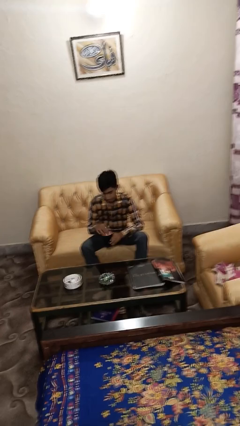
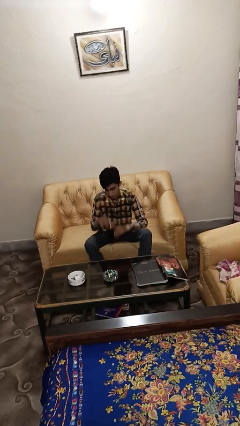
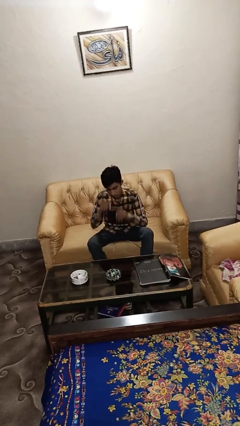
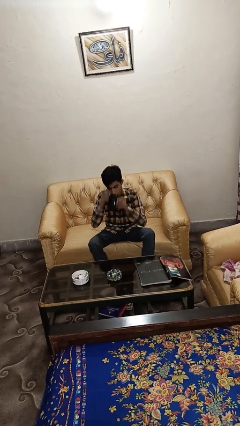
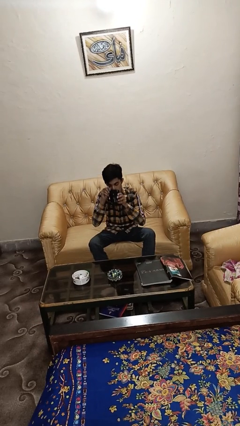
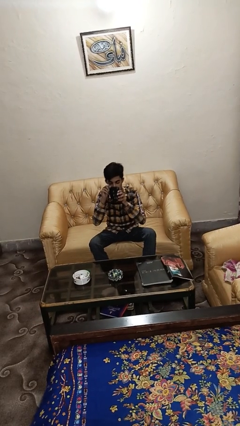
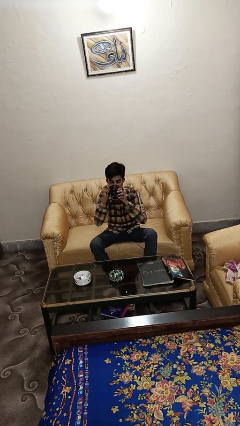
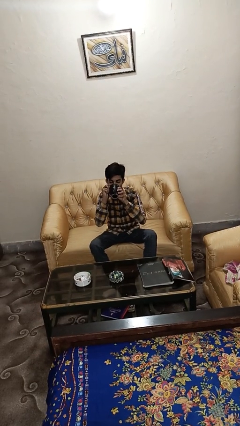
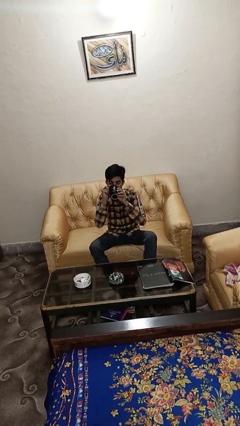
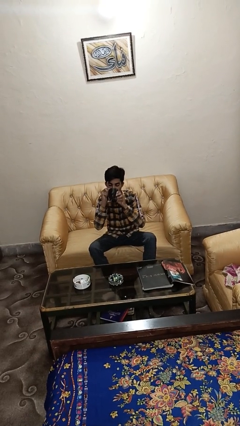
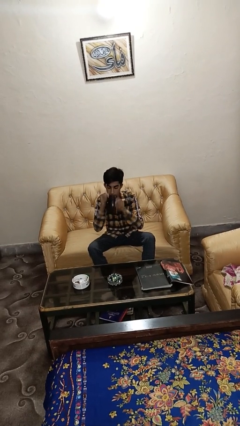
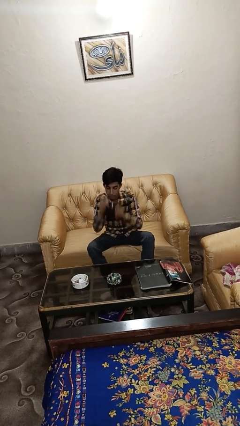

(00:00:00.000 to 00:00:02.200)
person drinks from mug

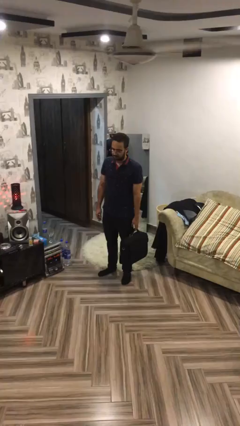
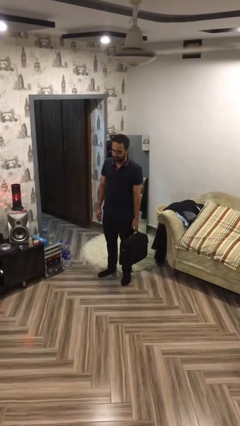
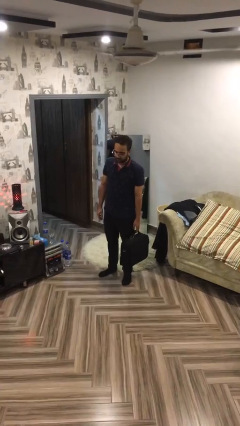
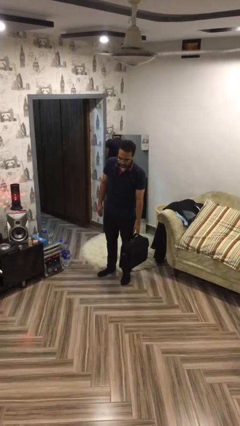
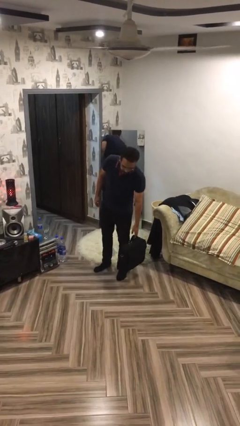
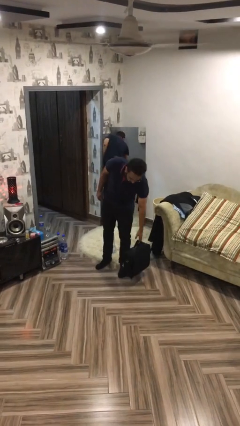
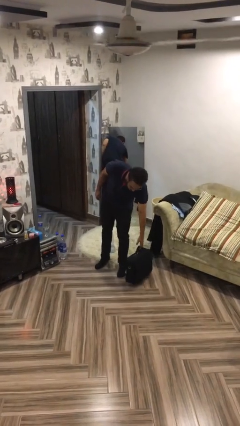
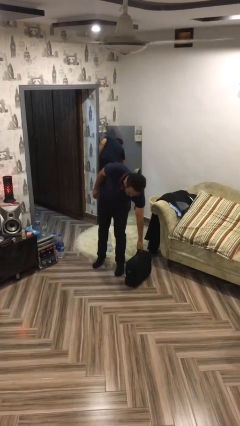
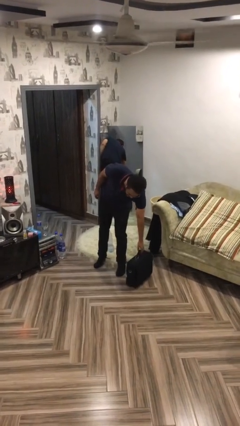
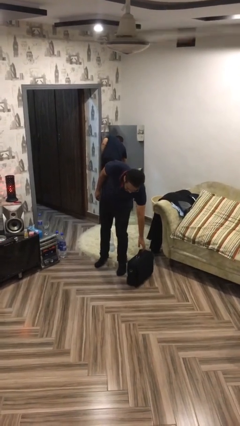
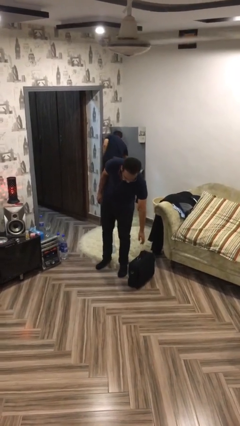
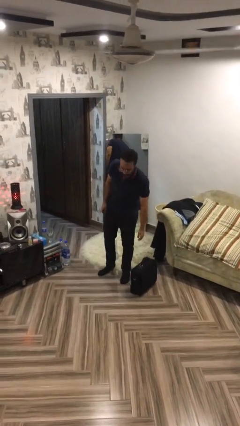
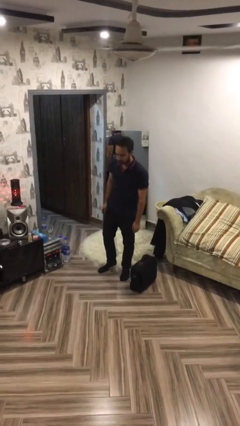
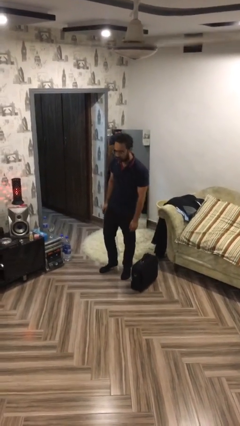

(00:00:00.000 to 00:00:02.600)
person puts down object on floor

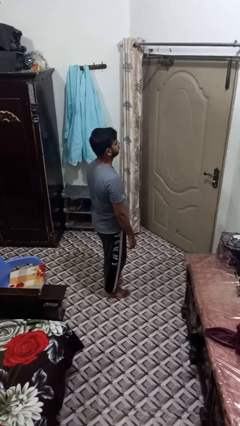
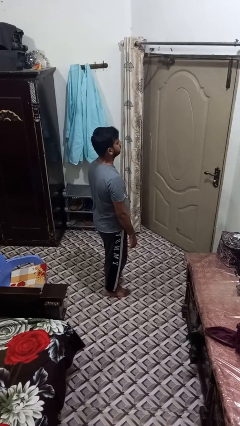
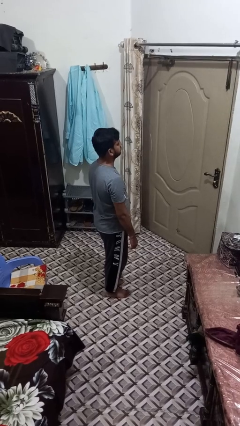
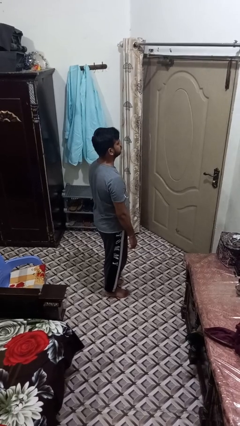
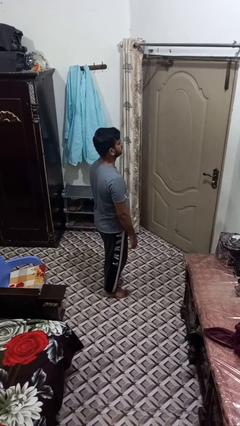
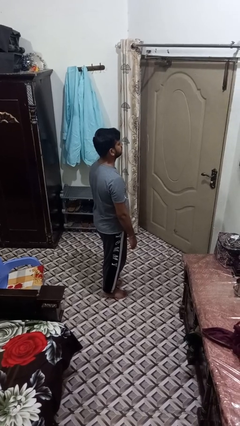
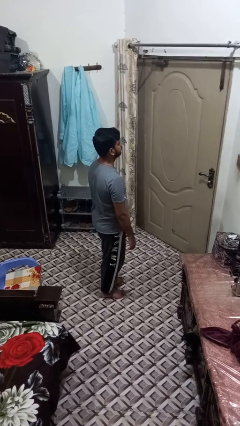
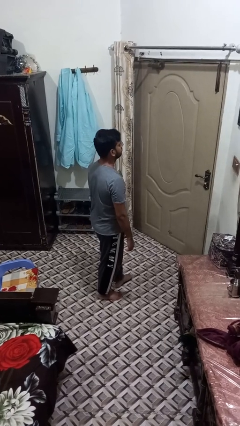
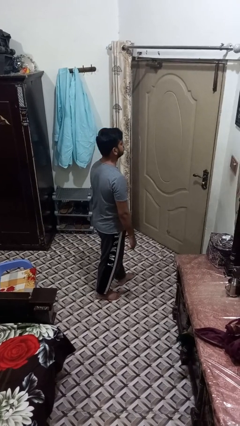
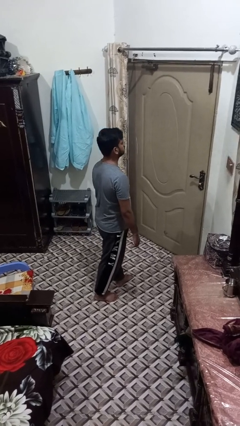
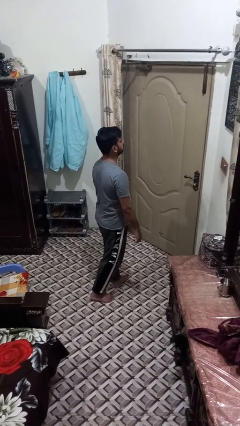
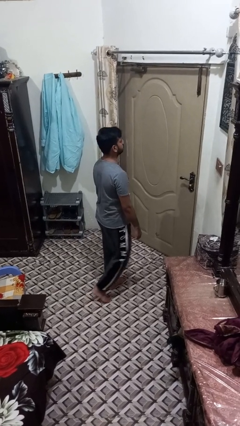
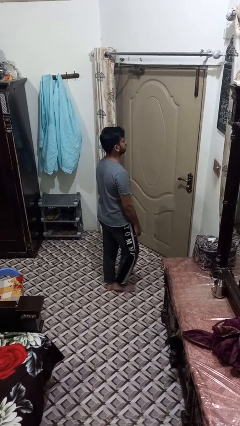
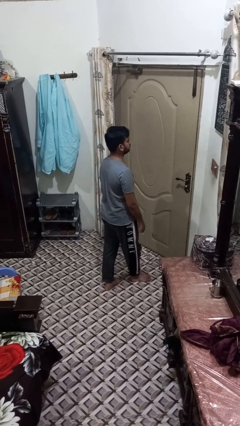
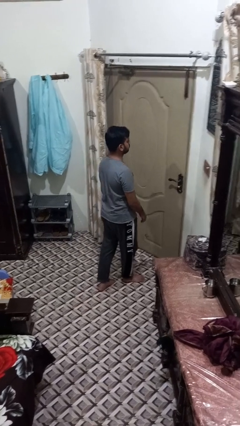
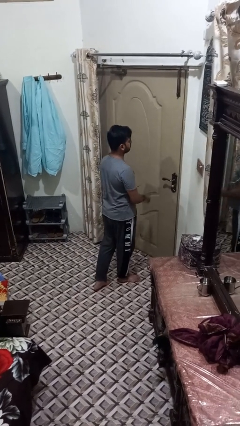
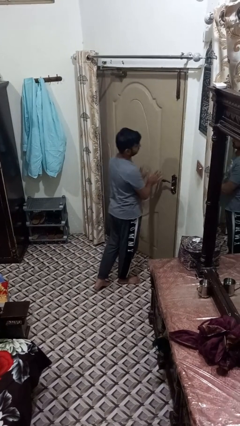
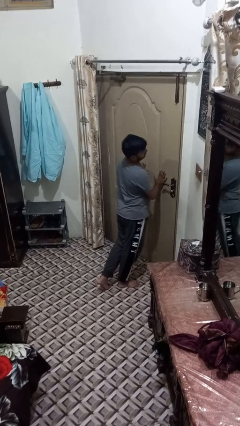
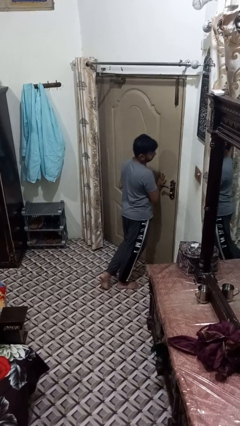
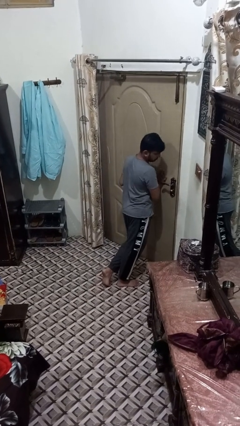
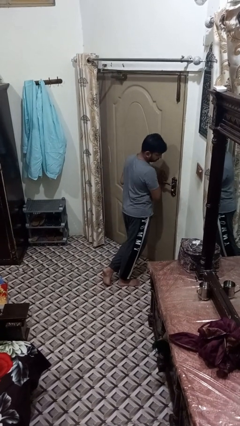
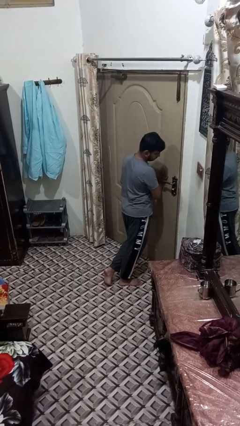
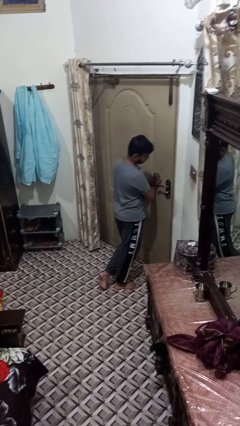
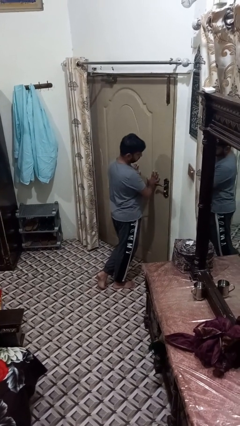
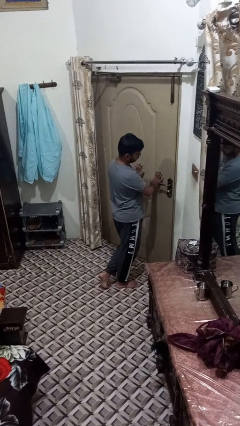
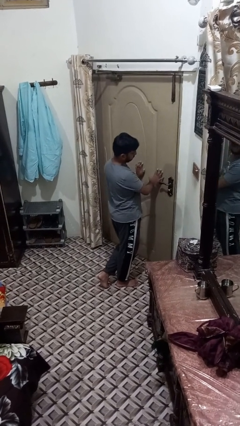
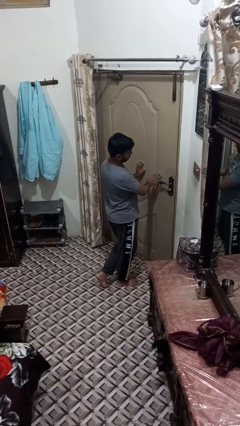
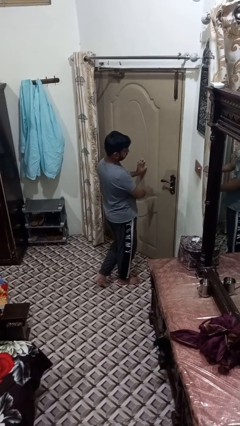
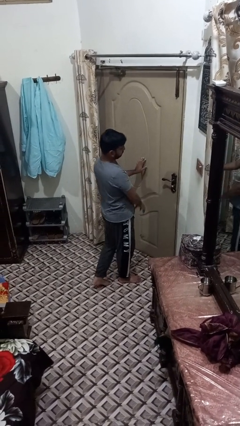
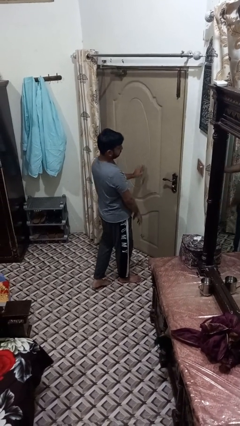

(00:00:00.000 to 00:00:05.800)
person bumps into wall

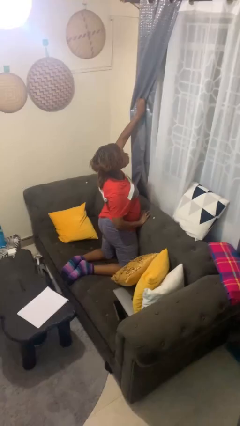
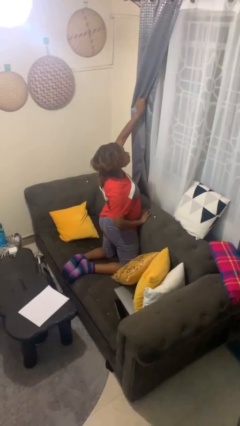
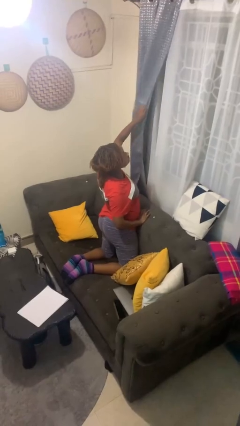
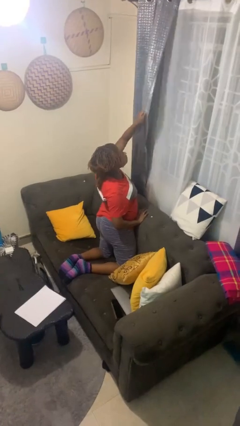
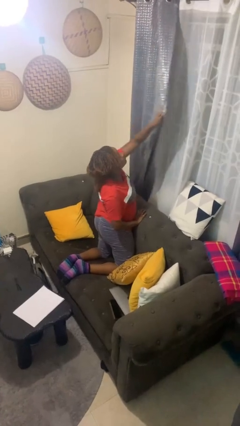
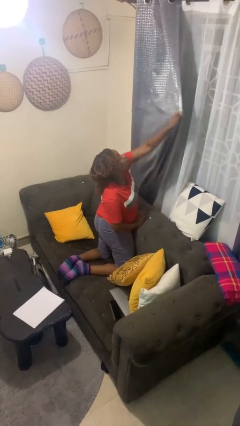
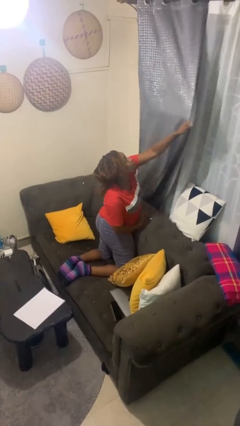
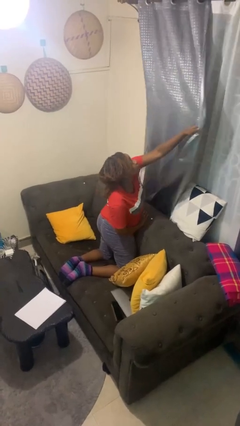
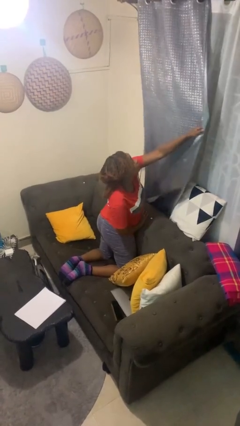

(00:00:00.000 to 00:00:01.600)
person closes curtains

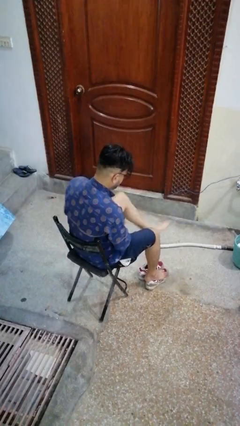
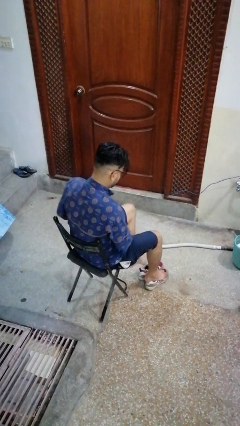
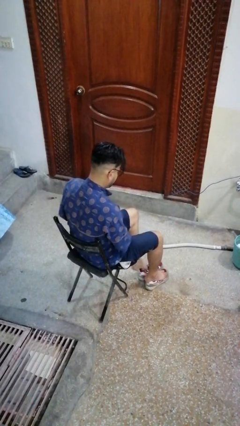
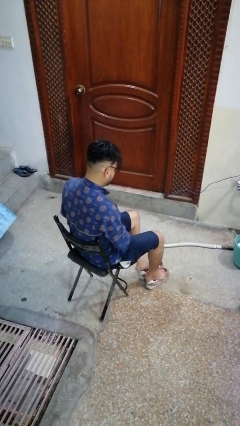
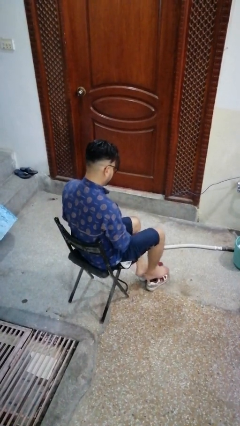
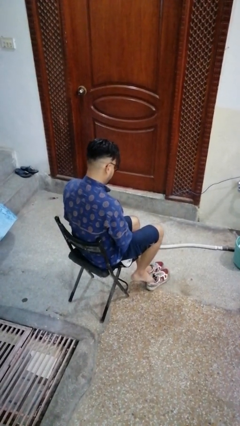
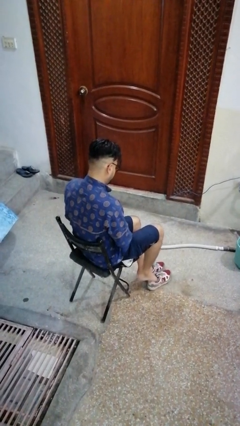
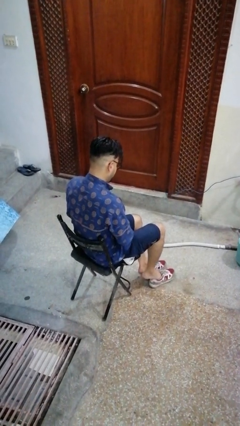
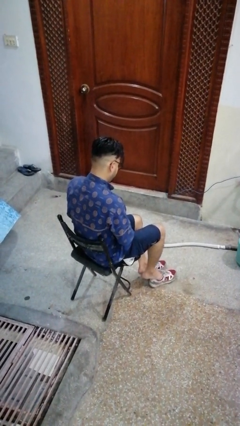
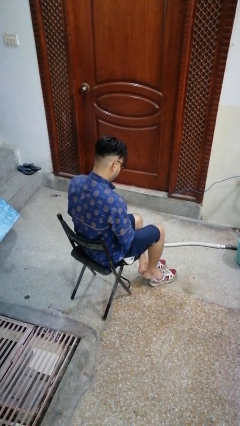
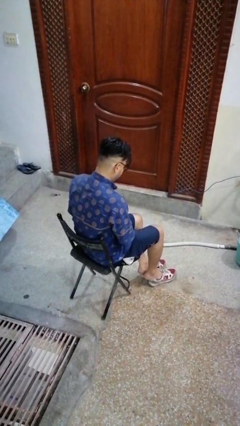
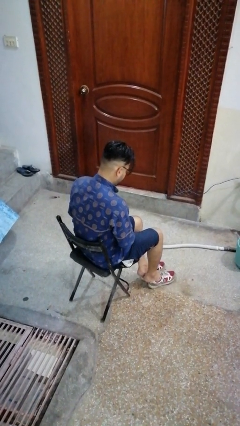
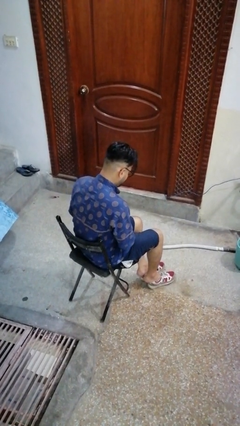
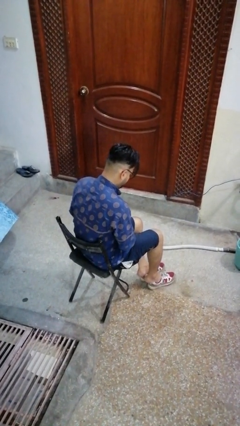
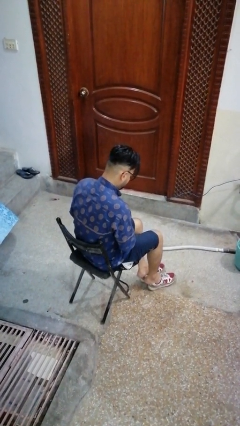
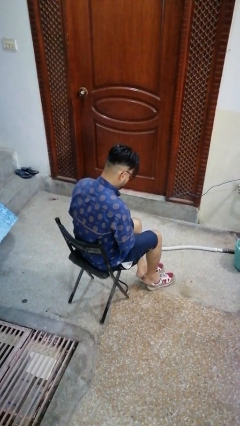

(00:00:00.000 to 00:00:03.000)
person rubs foot

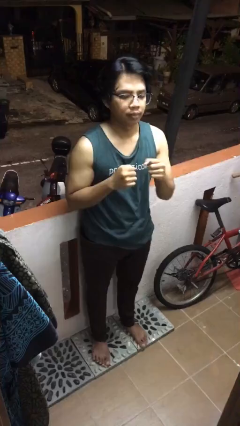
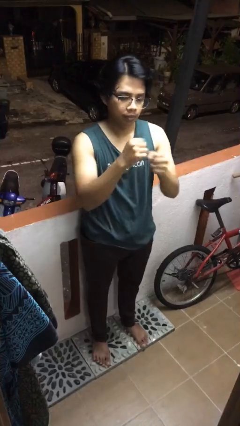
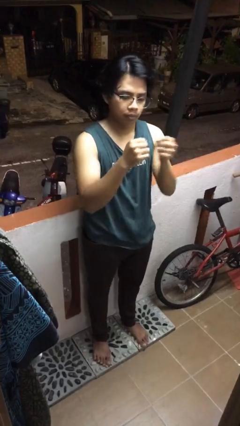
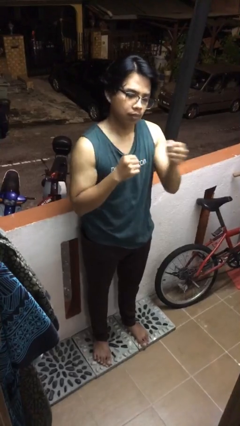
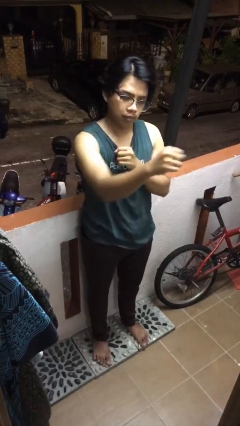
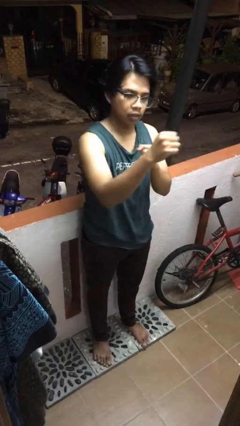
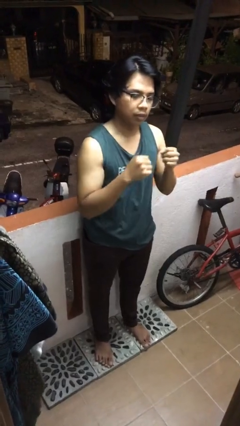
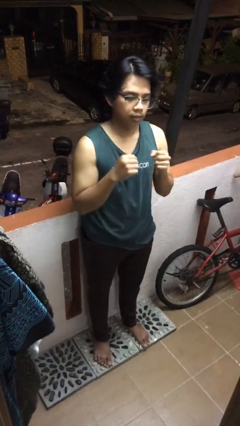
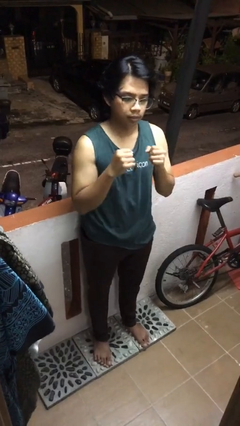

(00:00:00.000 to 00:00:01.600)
person punches

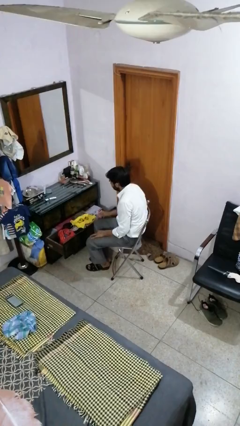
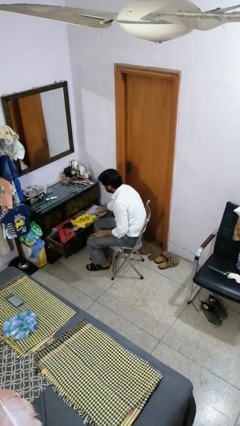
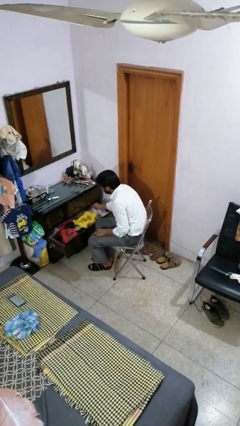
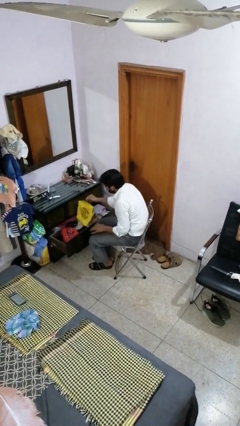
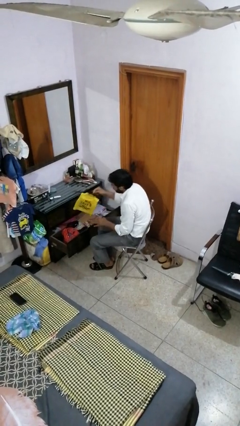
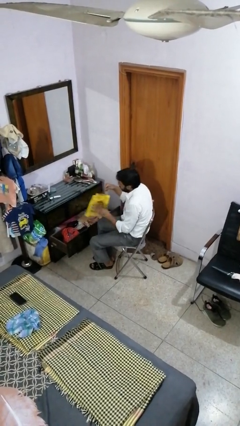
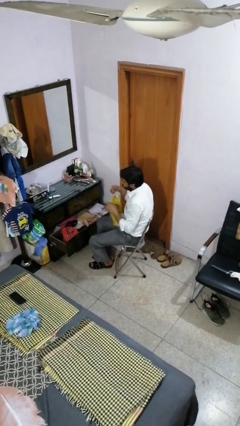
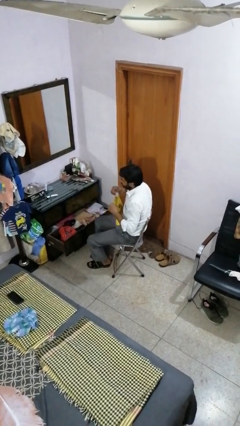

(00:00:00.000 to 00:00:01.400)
person takes clothes from dresser
